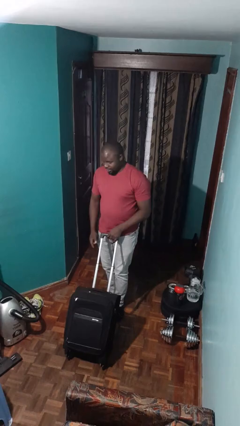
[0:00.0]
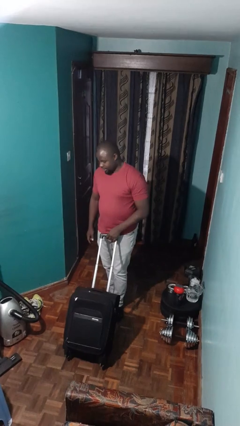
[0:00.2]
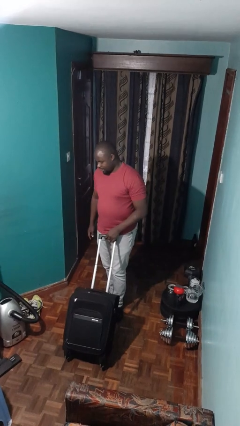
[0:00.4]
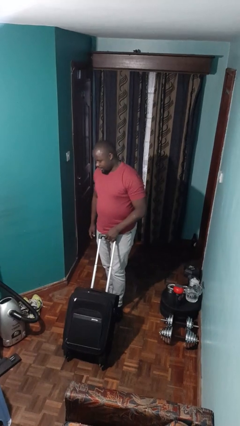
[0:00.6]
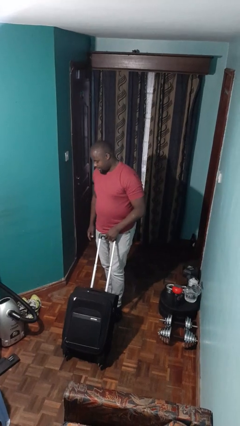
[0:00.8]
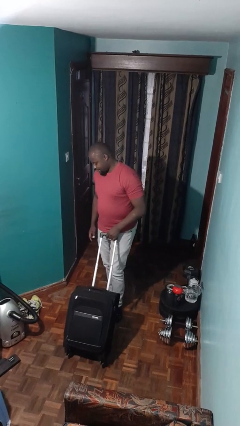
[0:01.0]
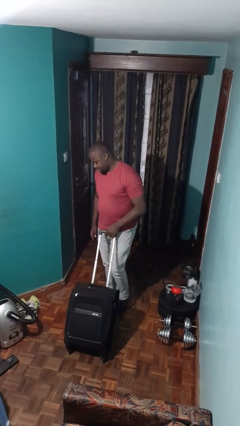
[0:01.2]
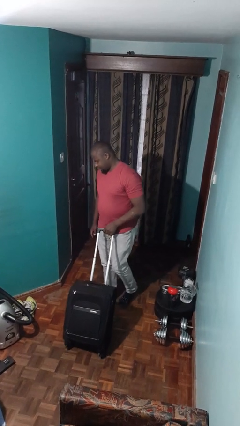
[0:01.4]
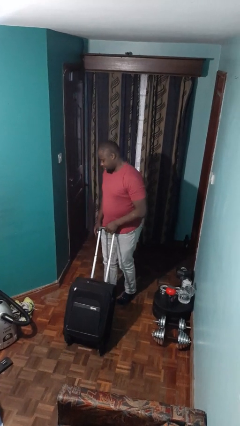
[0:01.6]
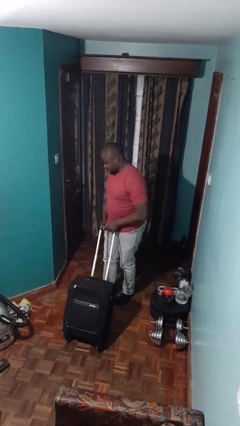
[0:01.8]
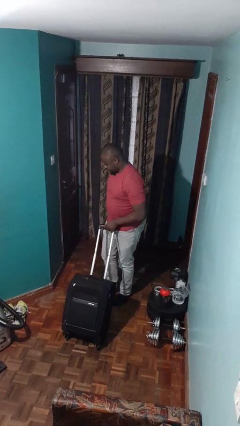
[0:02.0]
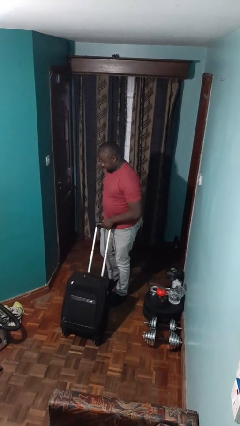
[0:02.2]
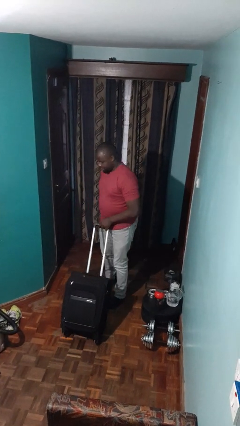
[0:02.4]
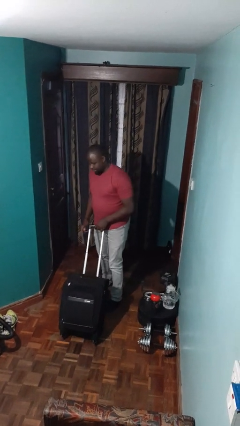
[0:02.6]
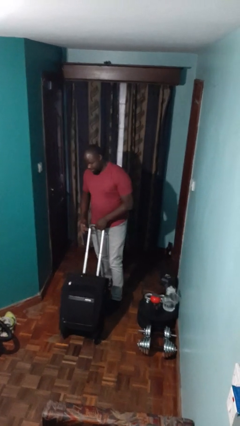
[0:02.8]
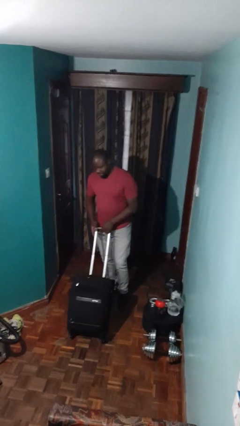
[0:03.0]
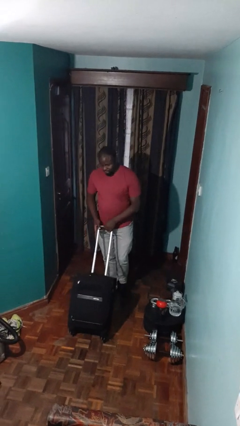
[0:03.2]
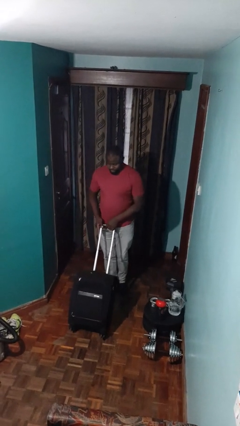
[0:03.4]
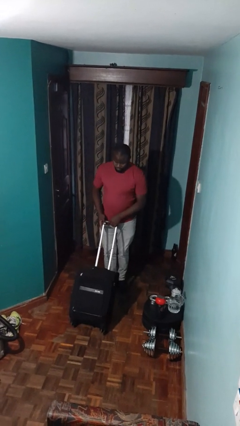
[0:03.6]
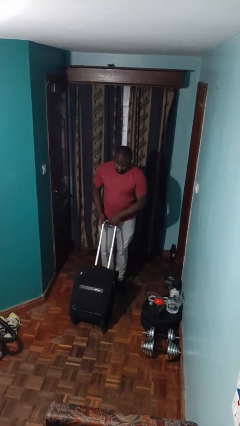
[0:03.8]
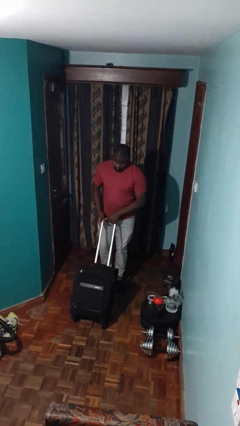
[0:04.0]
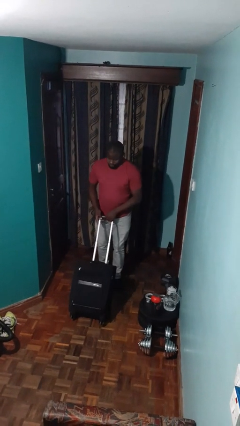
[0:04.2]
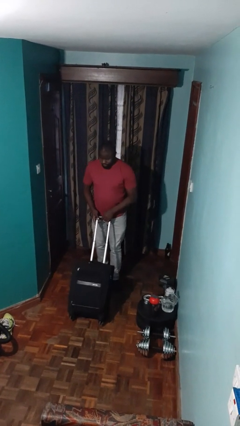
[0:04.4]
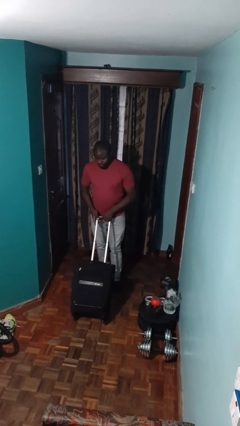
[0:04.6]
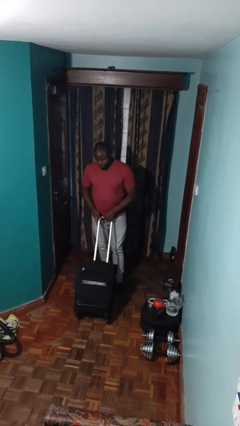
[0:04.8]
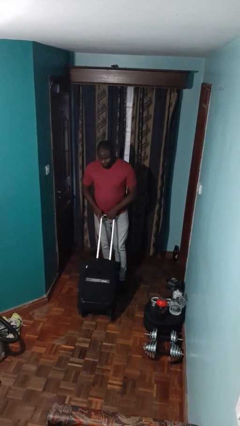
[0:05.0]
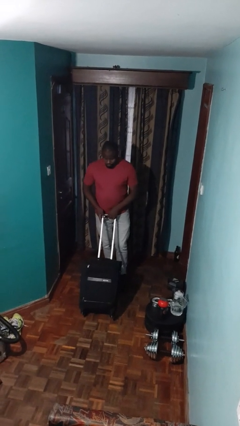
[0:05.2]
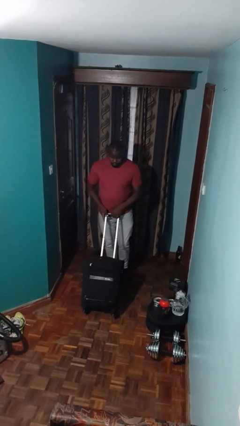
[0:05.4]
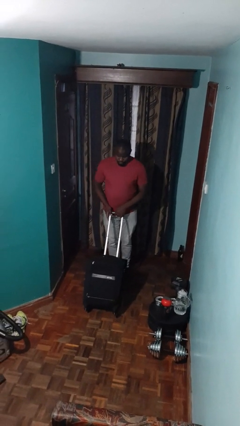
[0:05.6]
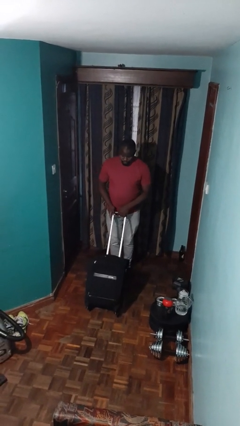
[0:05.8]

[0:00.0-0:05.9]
person pulls wheeled cart

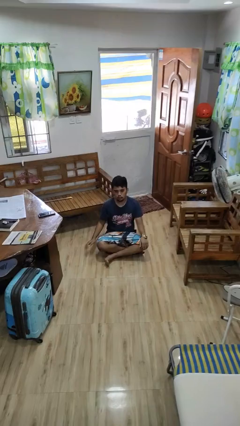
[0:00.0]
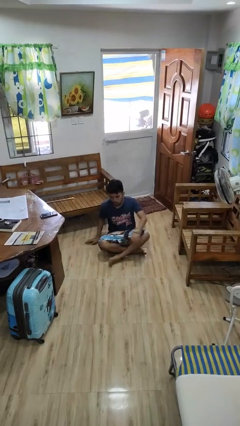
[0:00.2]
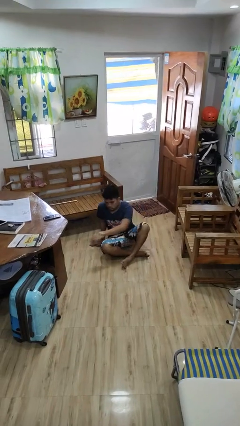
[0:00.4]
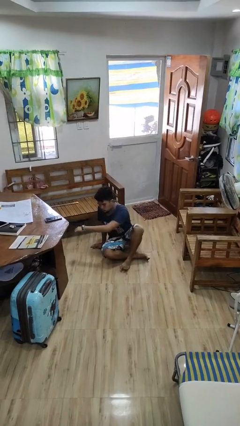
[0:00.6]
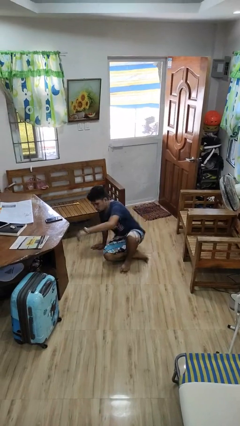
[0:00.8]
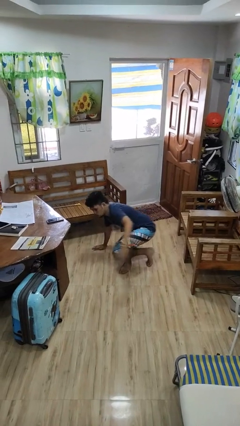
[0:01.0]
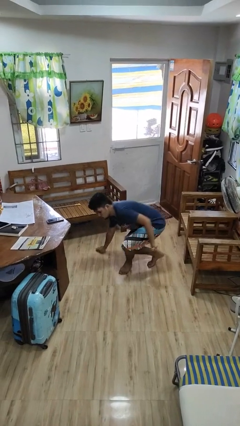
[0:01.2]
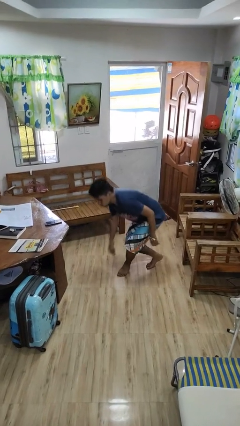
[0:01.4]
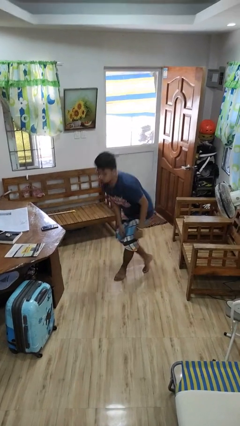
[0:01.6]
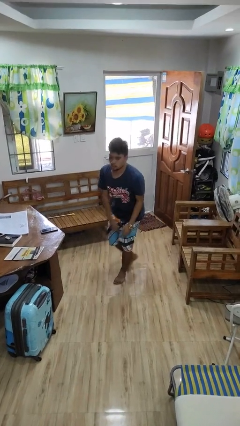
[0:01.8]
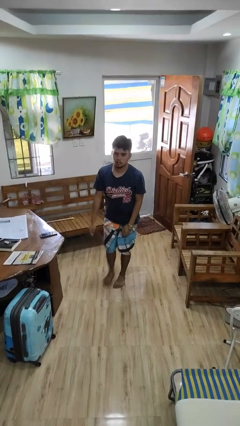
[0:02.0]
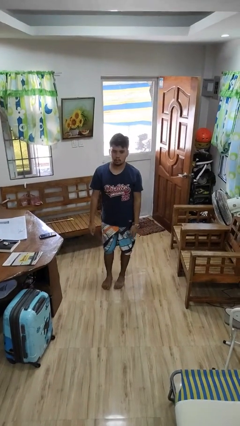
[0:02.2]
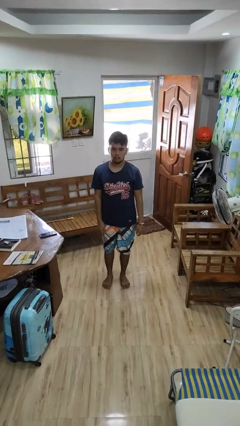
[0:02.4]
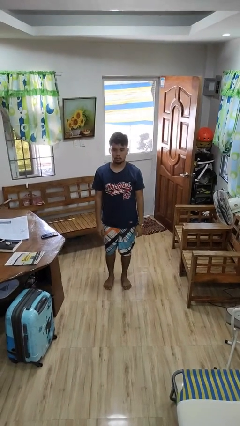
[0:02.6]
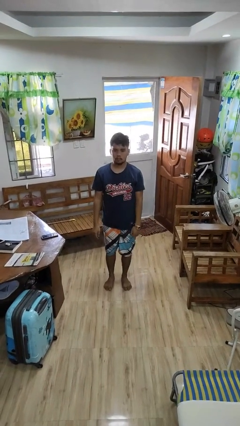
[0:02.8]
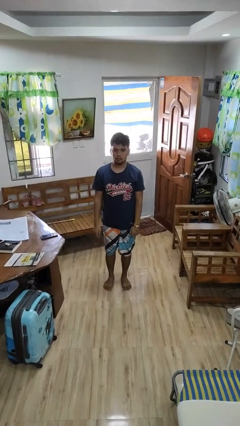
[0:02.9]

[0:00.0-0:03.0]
person stands up from floor

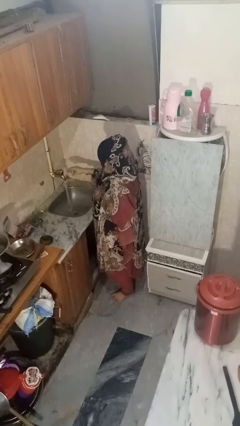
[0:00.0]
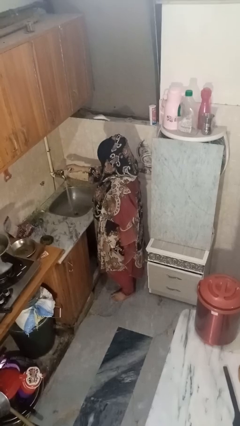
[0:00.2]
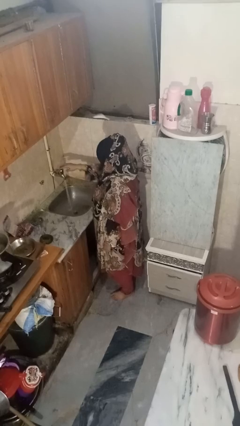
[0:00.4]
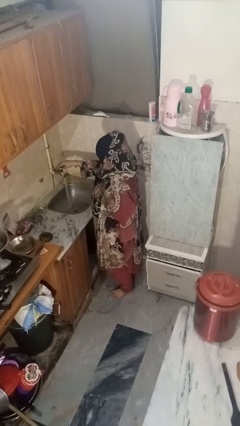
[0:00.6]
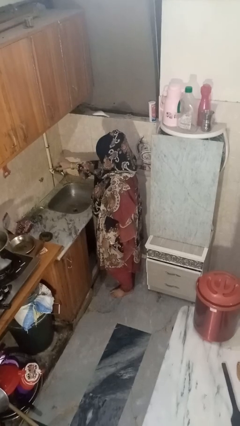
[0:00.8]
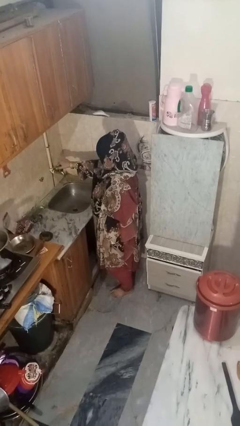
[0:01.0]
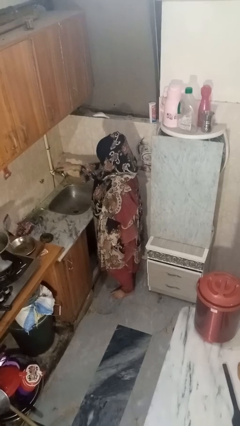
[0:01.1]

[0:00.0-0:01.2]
person turns off faucet

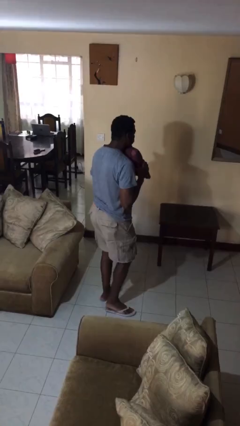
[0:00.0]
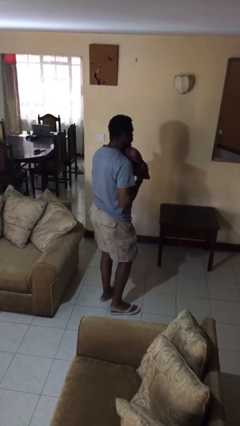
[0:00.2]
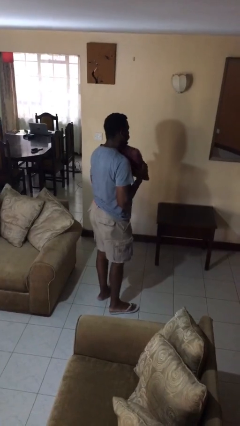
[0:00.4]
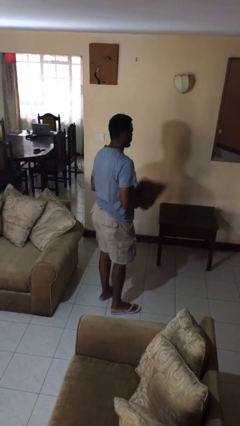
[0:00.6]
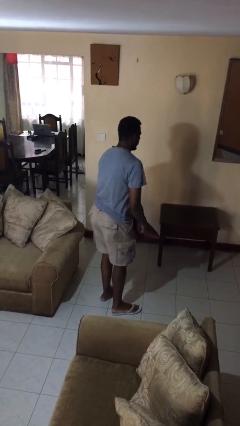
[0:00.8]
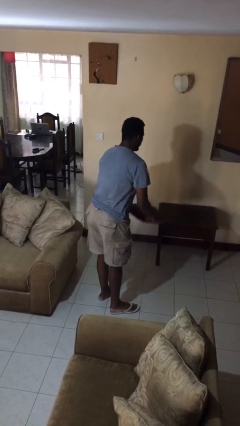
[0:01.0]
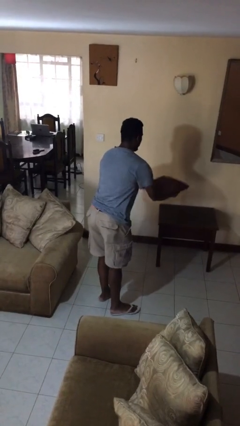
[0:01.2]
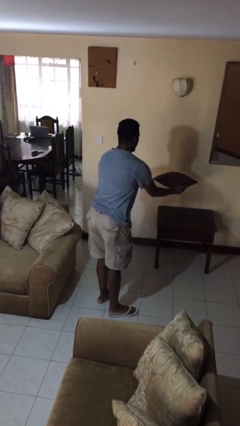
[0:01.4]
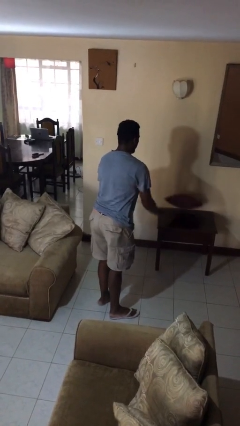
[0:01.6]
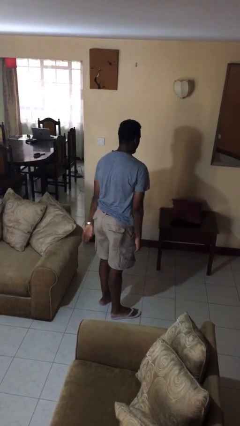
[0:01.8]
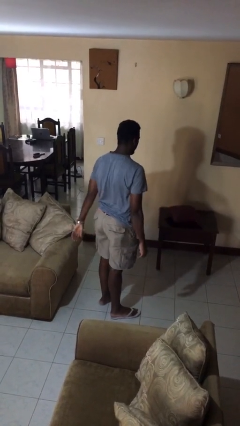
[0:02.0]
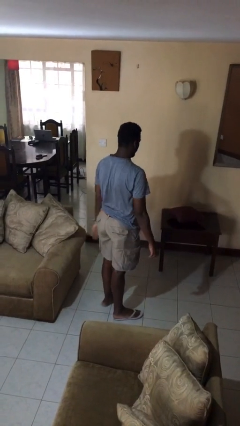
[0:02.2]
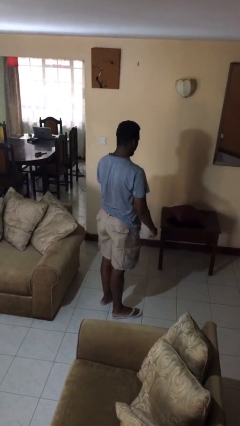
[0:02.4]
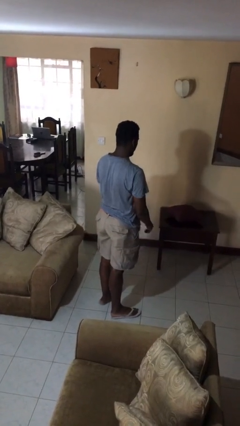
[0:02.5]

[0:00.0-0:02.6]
person throws object on table

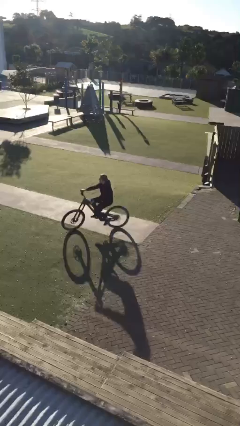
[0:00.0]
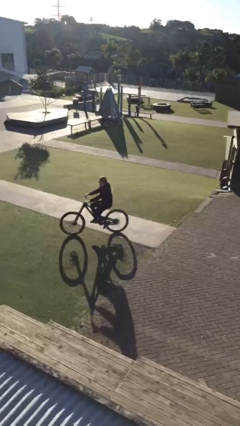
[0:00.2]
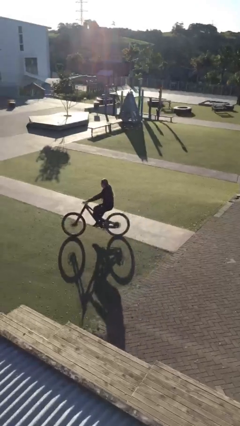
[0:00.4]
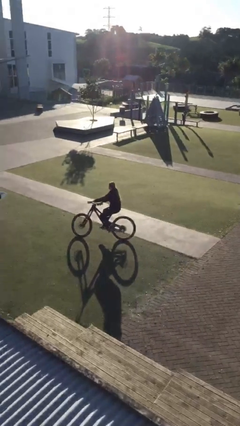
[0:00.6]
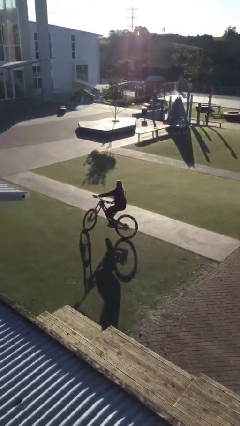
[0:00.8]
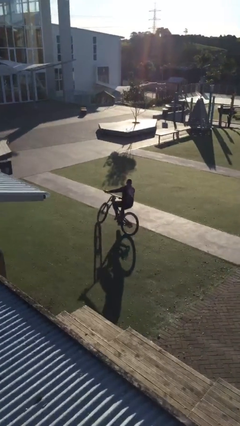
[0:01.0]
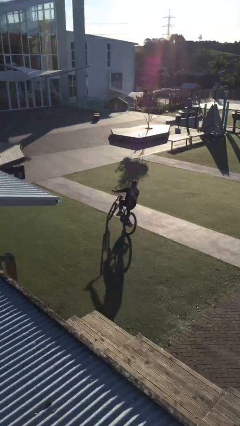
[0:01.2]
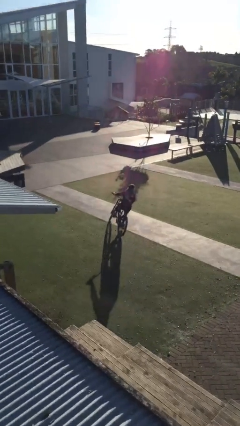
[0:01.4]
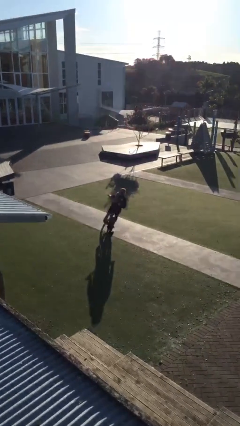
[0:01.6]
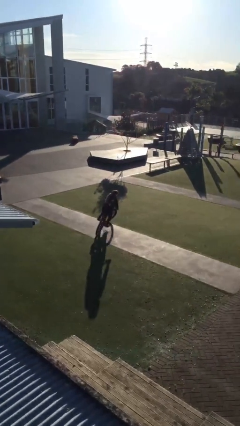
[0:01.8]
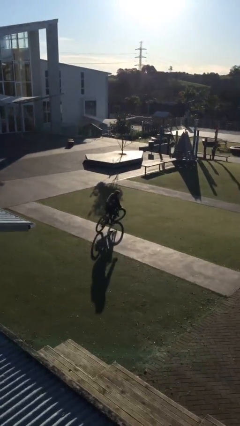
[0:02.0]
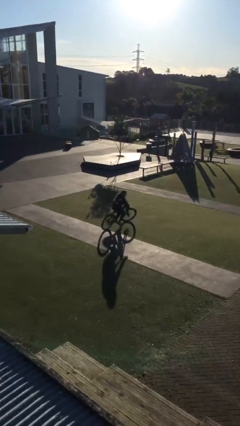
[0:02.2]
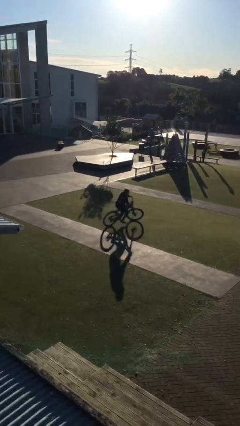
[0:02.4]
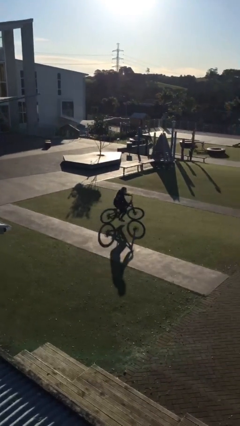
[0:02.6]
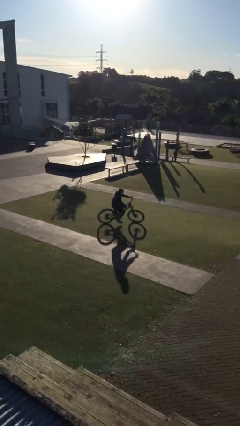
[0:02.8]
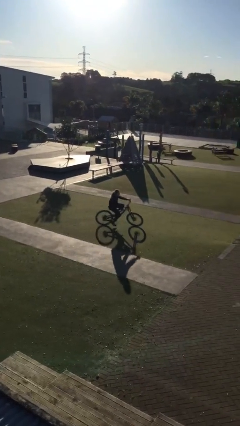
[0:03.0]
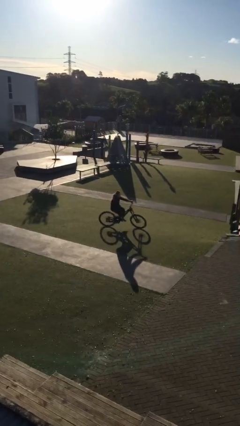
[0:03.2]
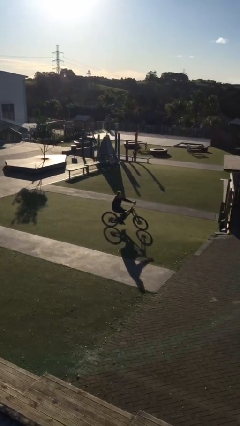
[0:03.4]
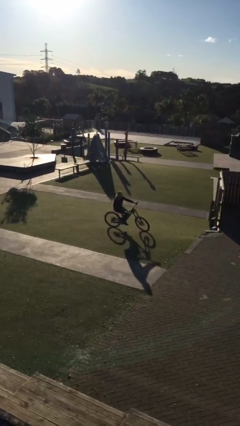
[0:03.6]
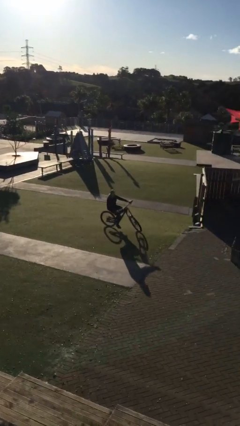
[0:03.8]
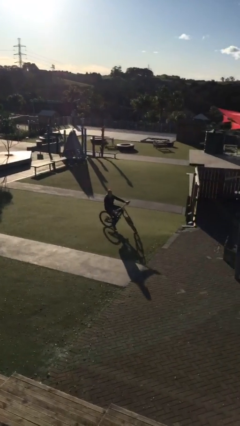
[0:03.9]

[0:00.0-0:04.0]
person rides bicycle

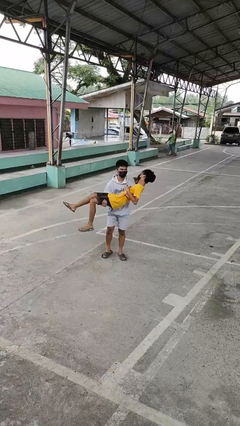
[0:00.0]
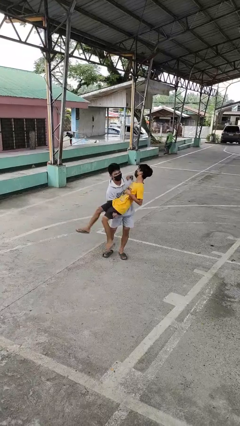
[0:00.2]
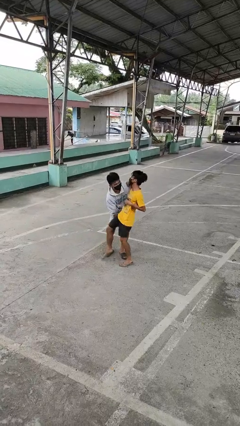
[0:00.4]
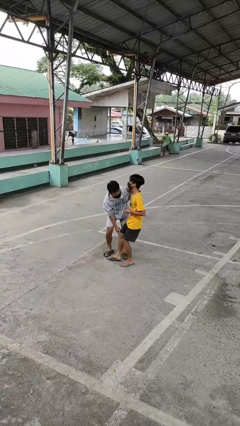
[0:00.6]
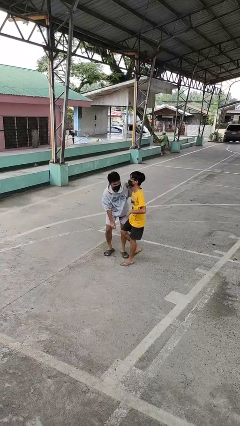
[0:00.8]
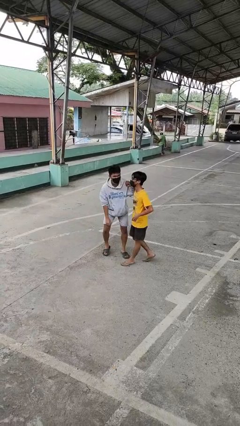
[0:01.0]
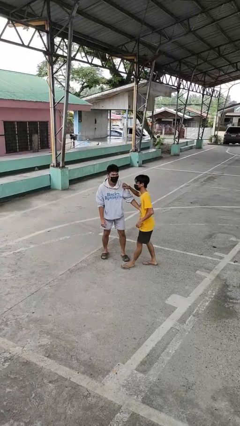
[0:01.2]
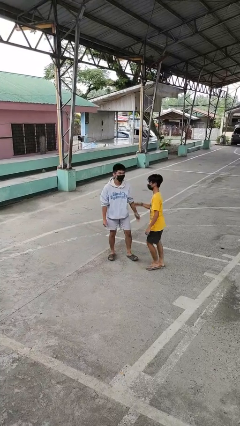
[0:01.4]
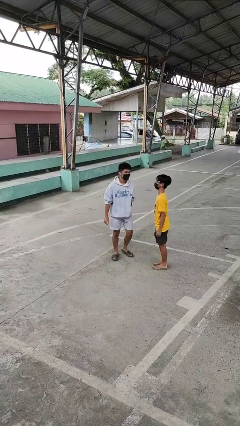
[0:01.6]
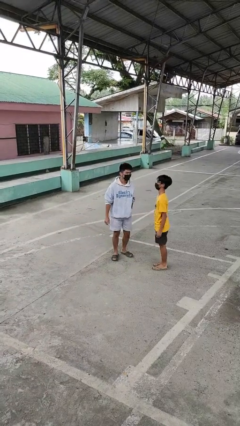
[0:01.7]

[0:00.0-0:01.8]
person puts down person
